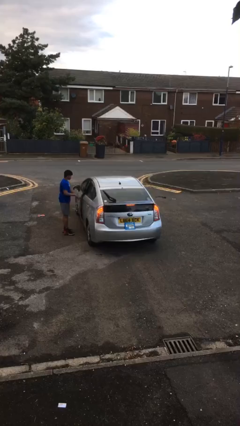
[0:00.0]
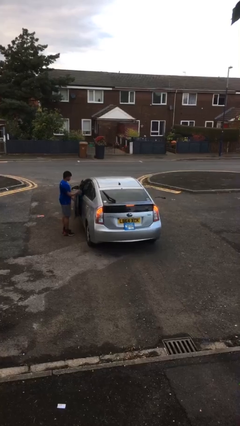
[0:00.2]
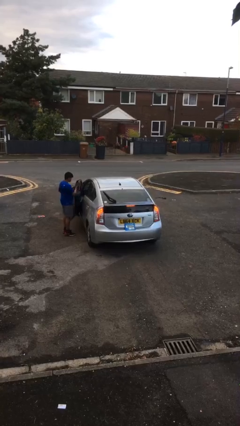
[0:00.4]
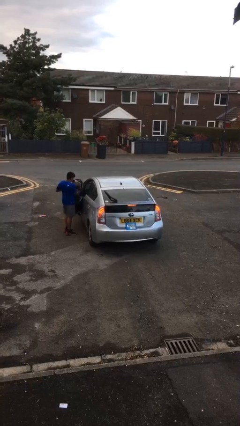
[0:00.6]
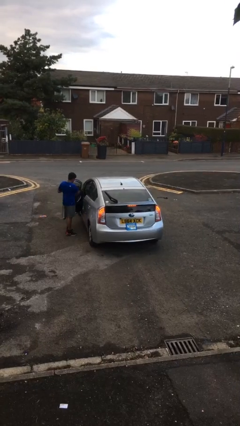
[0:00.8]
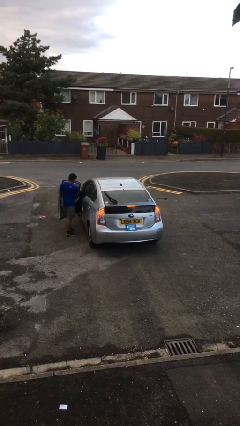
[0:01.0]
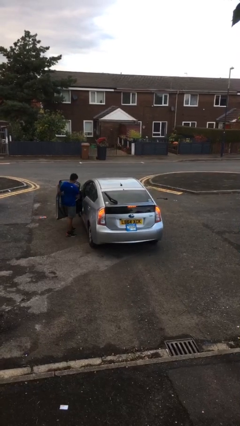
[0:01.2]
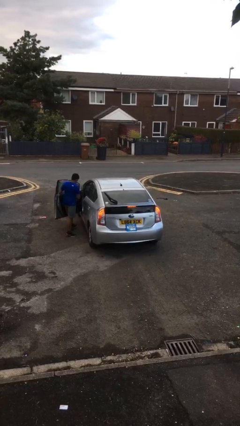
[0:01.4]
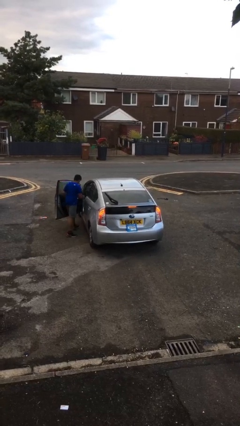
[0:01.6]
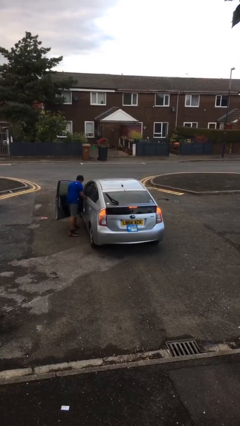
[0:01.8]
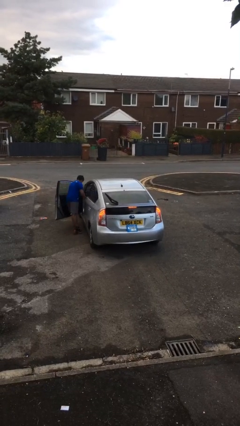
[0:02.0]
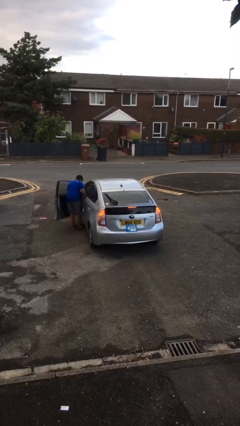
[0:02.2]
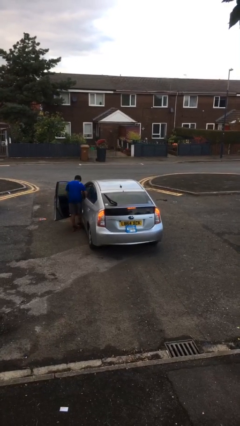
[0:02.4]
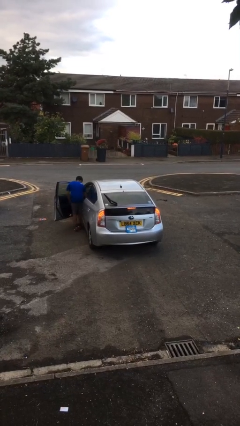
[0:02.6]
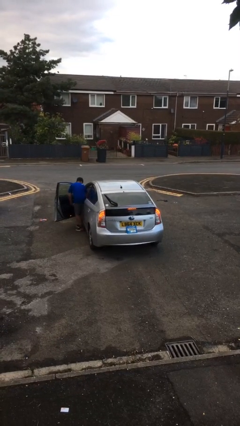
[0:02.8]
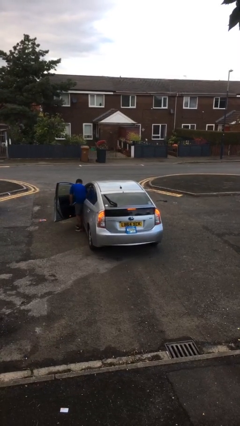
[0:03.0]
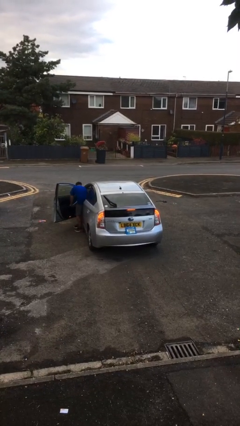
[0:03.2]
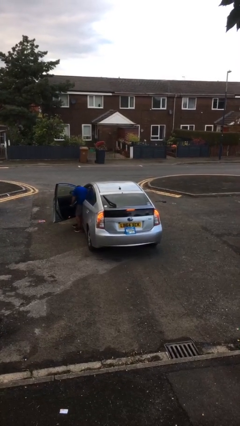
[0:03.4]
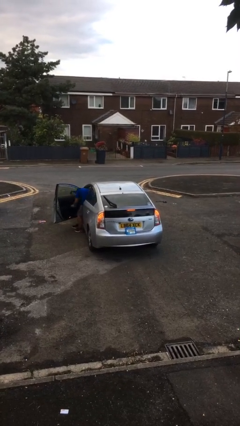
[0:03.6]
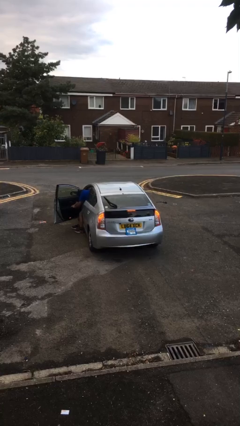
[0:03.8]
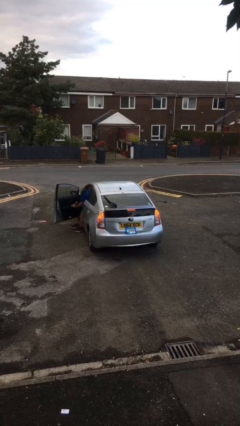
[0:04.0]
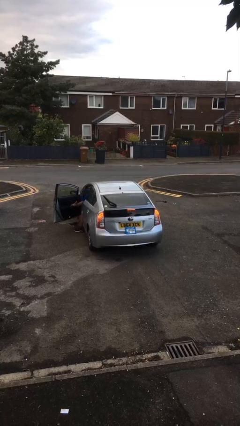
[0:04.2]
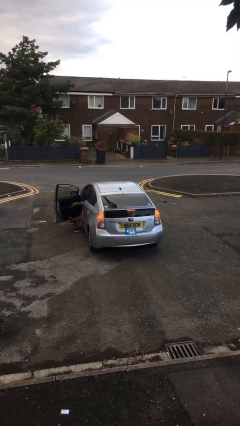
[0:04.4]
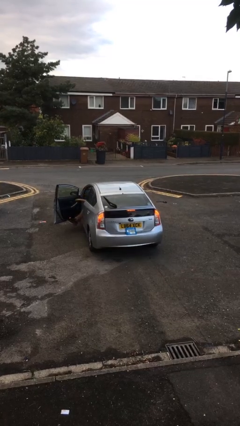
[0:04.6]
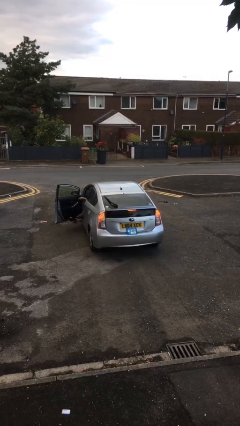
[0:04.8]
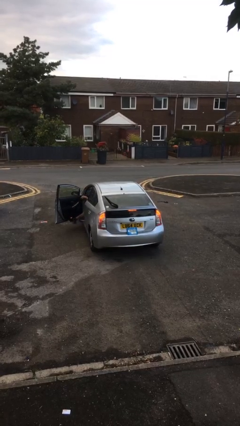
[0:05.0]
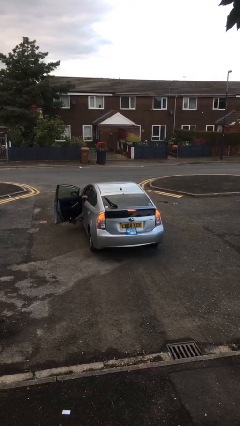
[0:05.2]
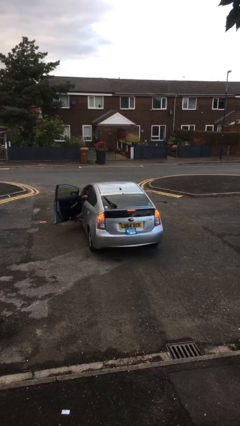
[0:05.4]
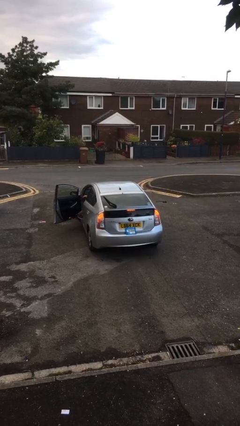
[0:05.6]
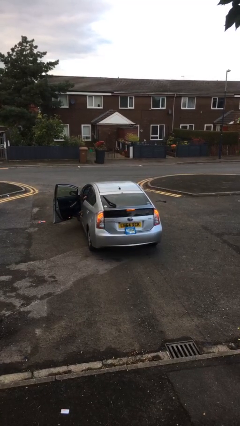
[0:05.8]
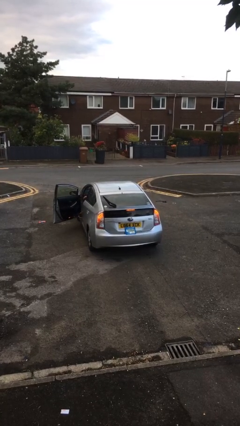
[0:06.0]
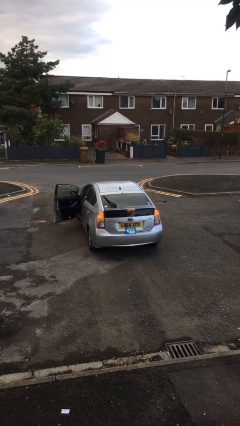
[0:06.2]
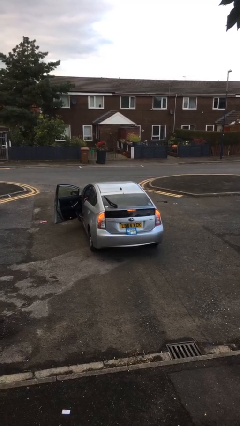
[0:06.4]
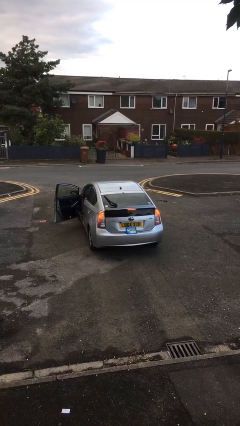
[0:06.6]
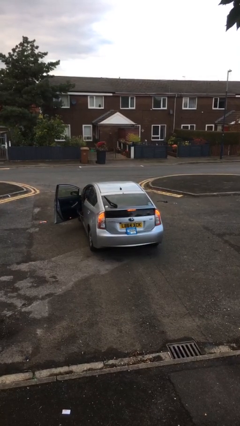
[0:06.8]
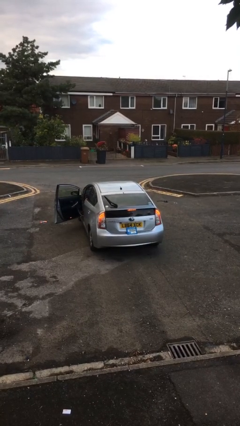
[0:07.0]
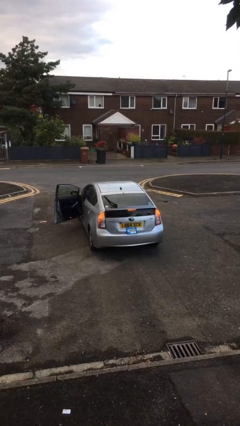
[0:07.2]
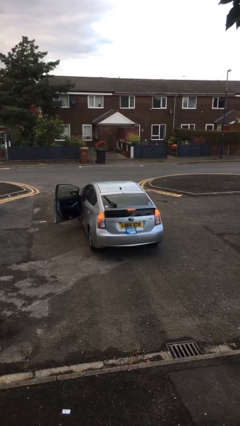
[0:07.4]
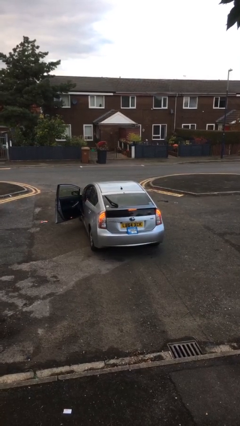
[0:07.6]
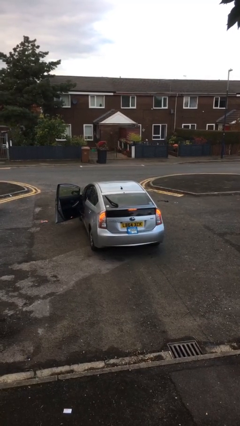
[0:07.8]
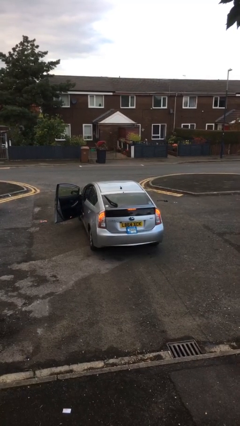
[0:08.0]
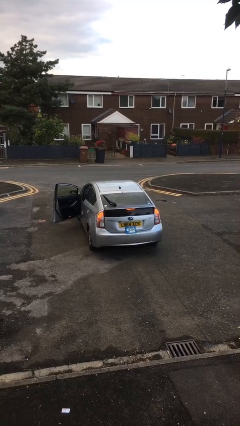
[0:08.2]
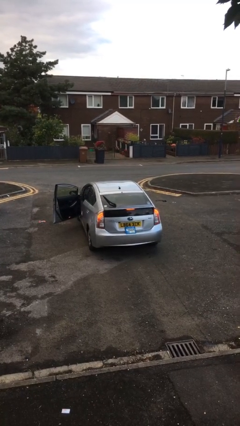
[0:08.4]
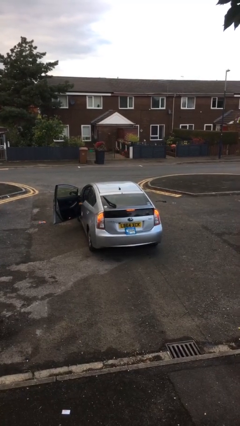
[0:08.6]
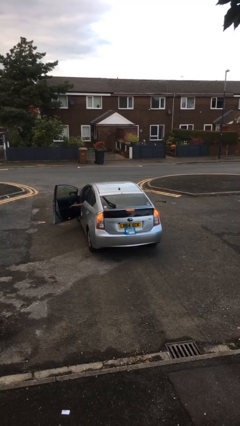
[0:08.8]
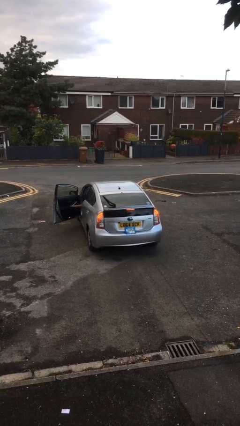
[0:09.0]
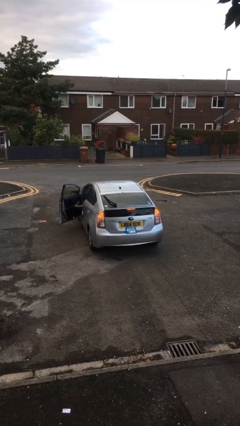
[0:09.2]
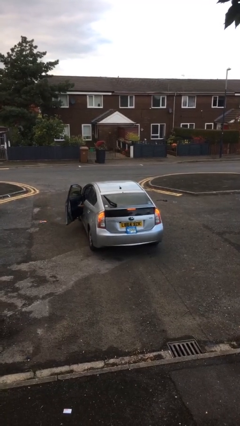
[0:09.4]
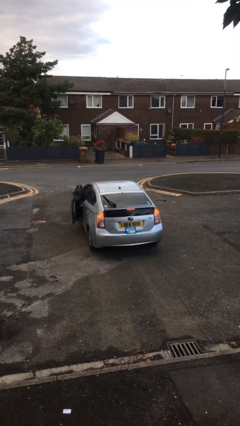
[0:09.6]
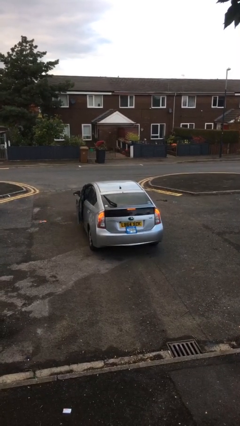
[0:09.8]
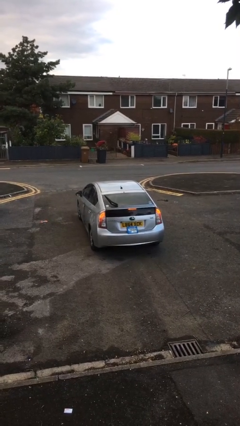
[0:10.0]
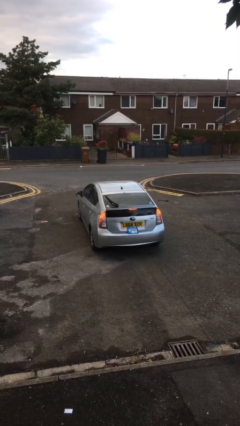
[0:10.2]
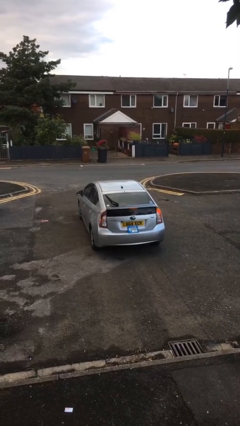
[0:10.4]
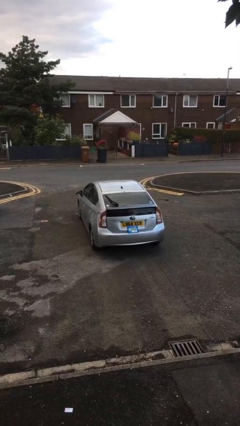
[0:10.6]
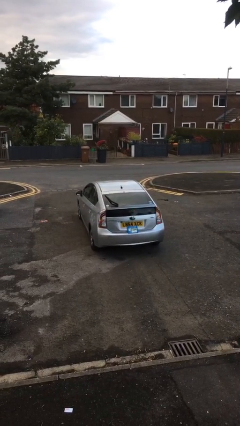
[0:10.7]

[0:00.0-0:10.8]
car picks up person

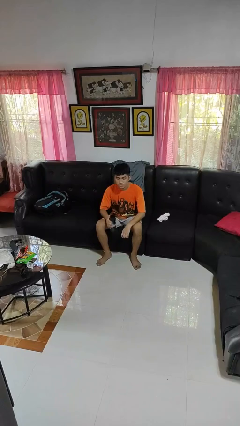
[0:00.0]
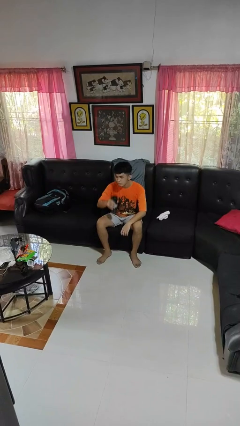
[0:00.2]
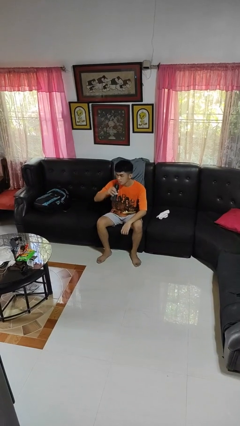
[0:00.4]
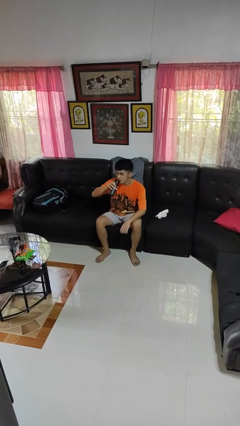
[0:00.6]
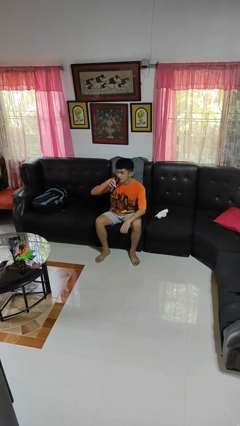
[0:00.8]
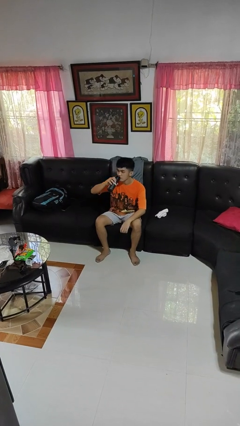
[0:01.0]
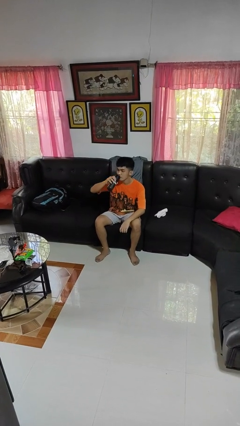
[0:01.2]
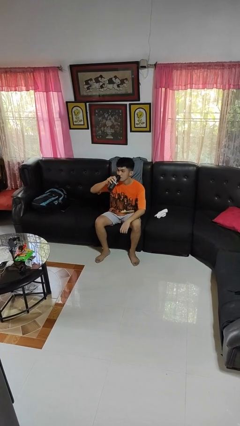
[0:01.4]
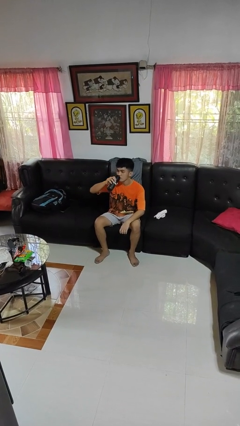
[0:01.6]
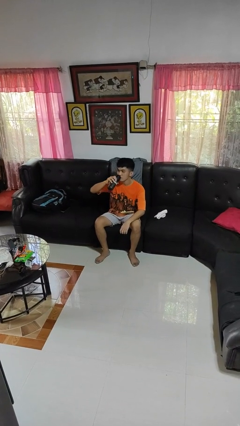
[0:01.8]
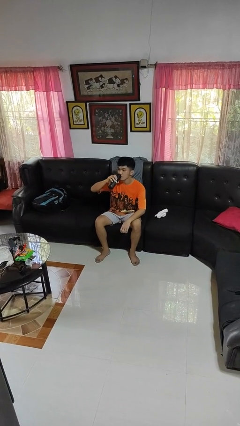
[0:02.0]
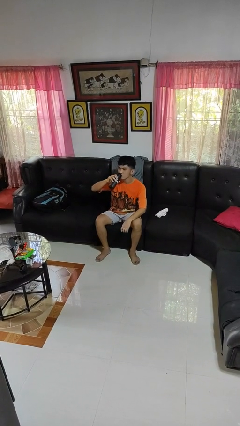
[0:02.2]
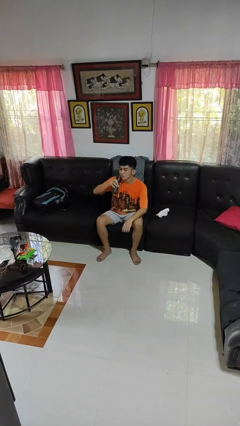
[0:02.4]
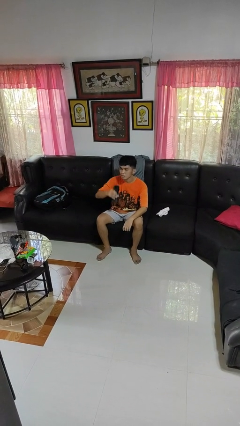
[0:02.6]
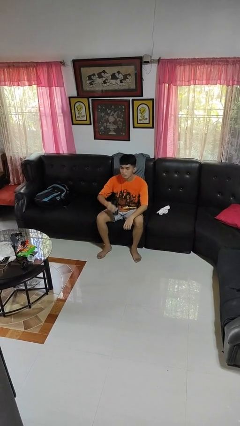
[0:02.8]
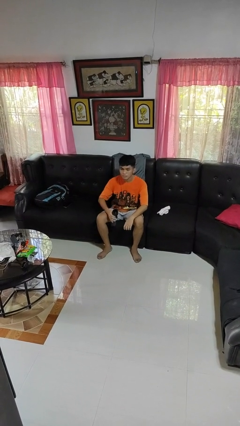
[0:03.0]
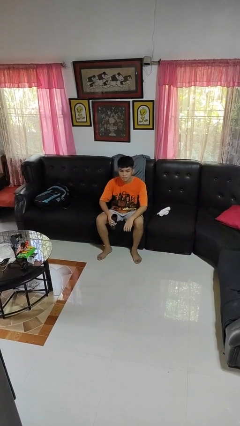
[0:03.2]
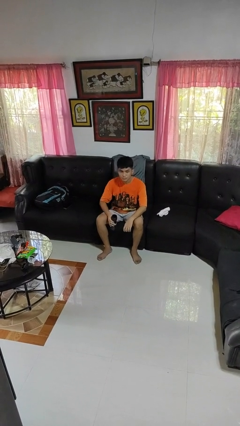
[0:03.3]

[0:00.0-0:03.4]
person drinks from bottle

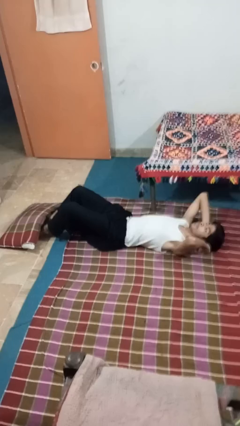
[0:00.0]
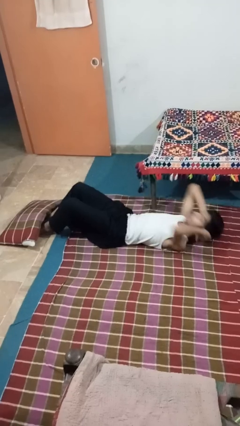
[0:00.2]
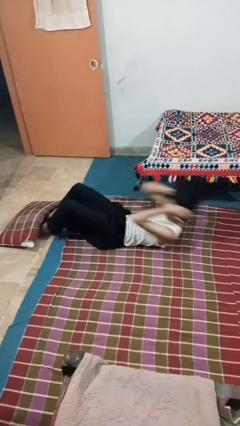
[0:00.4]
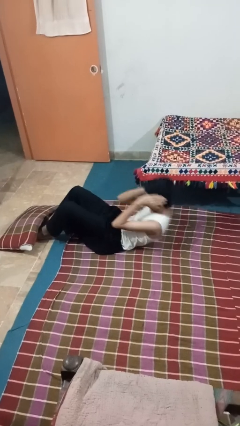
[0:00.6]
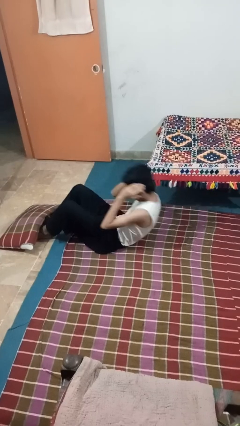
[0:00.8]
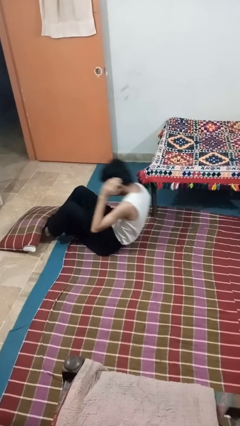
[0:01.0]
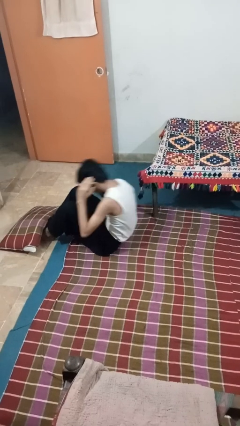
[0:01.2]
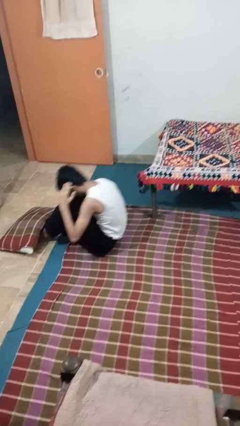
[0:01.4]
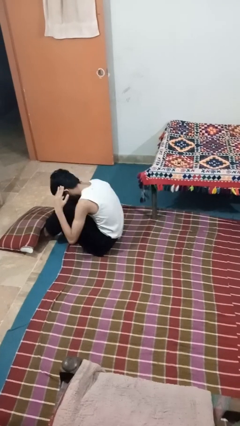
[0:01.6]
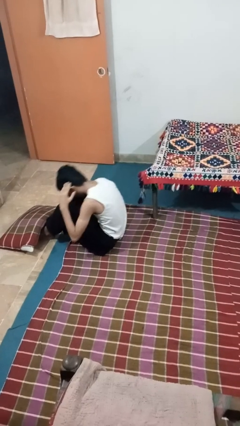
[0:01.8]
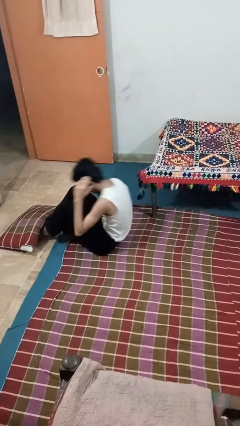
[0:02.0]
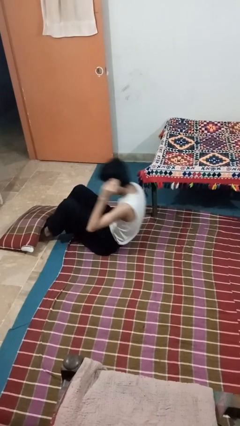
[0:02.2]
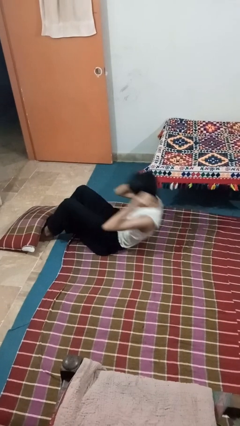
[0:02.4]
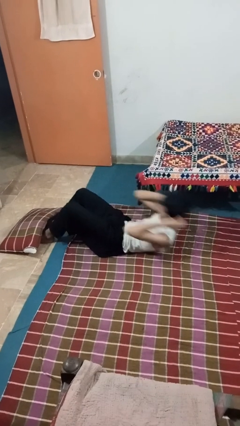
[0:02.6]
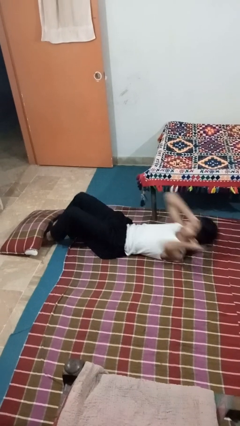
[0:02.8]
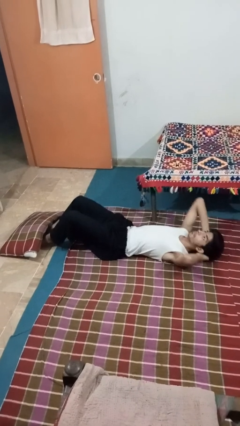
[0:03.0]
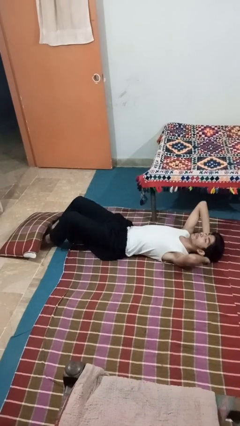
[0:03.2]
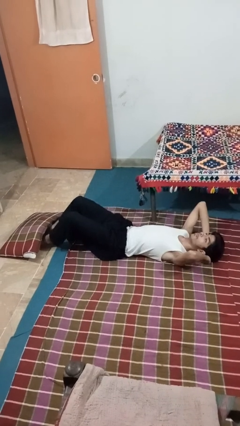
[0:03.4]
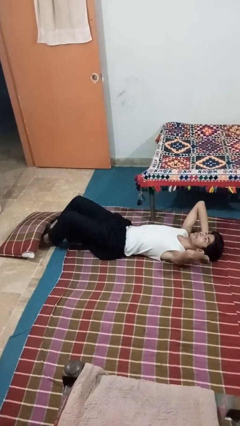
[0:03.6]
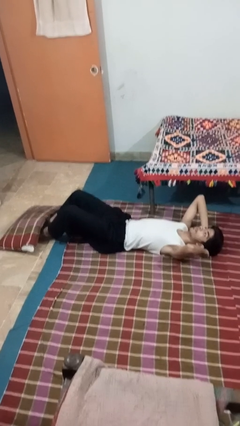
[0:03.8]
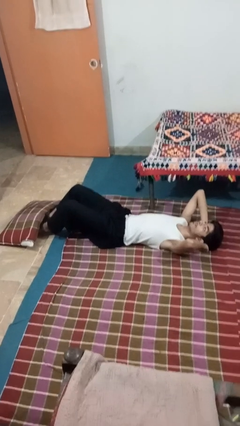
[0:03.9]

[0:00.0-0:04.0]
person exercises with situp
